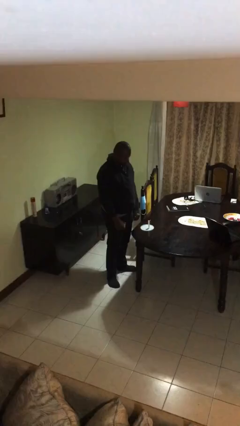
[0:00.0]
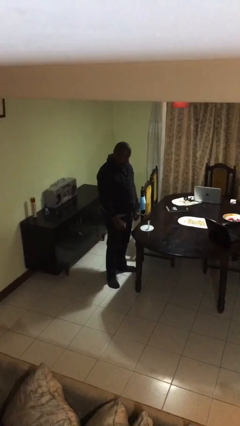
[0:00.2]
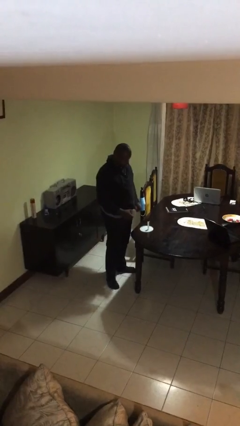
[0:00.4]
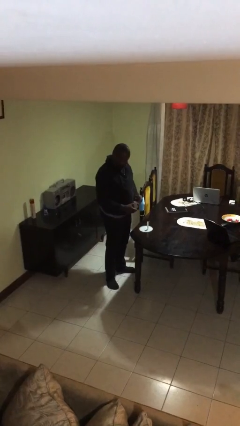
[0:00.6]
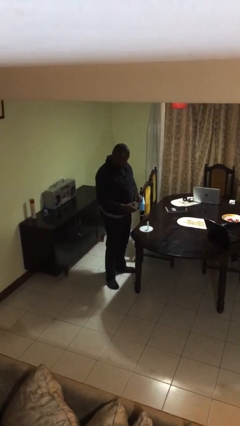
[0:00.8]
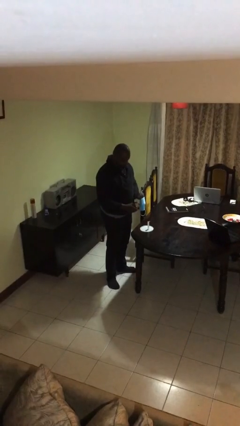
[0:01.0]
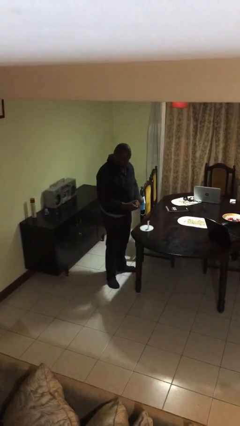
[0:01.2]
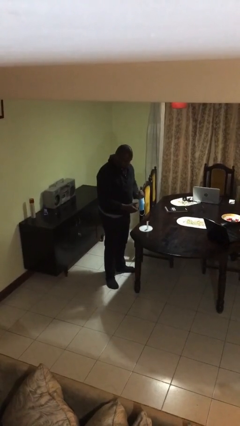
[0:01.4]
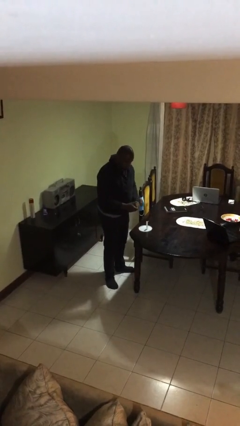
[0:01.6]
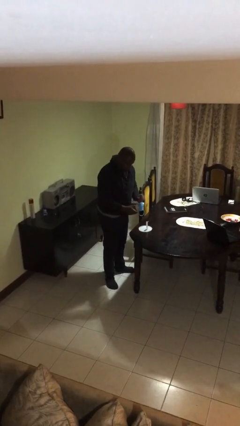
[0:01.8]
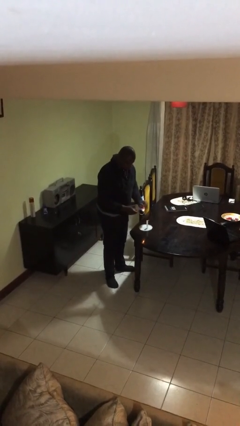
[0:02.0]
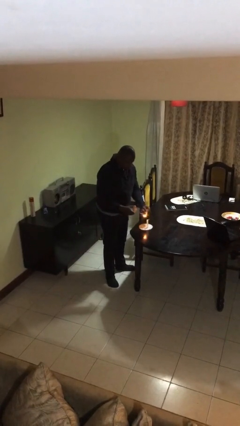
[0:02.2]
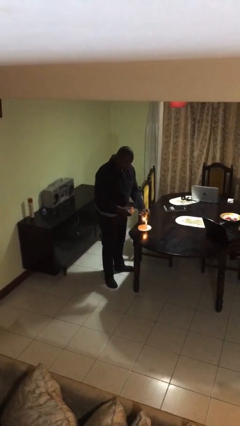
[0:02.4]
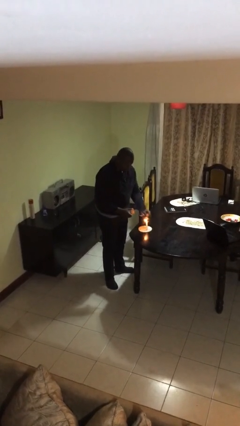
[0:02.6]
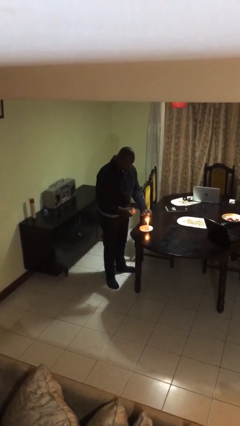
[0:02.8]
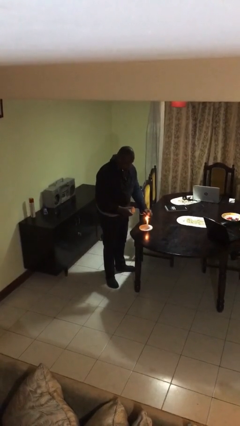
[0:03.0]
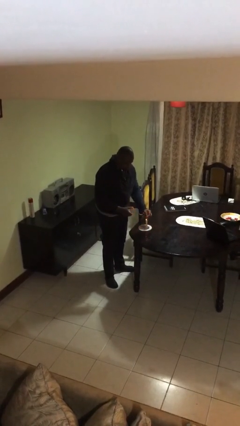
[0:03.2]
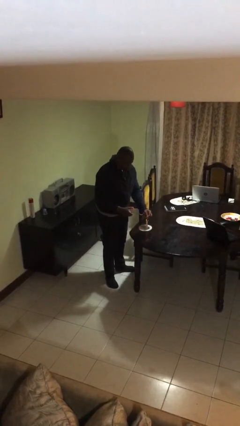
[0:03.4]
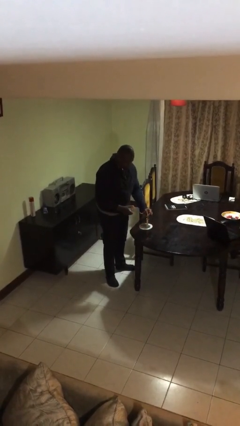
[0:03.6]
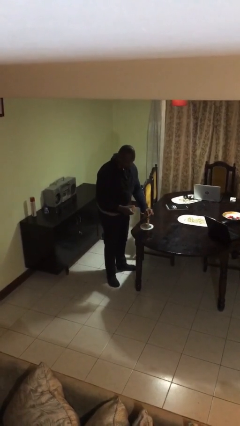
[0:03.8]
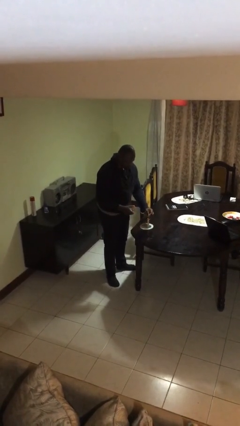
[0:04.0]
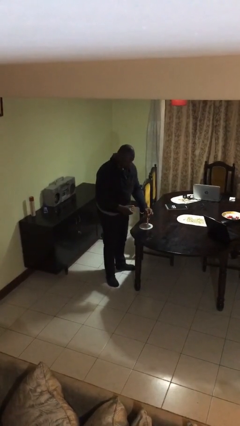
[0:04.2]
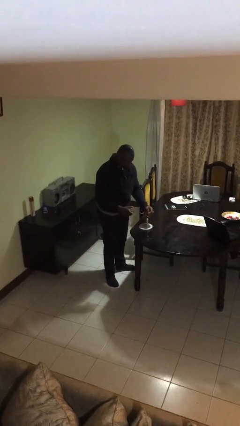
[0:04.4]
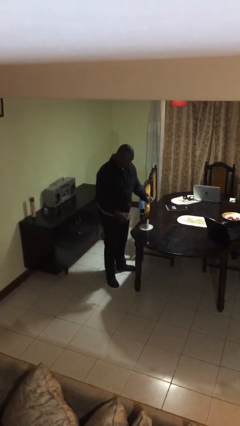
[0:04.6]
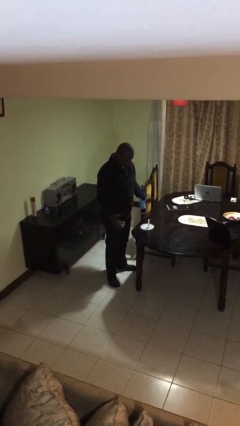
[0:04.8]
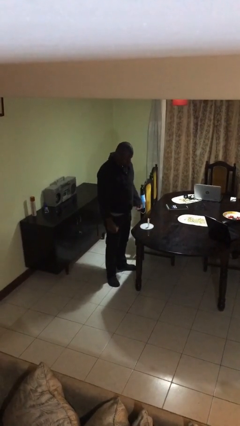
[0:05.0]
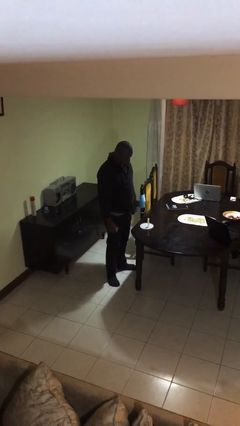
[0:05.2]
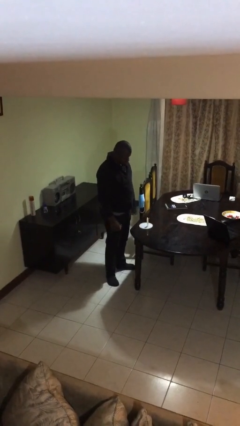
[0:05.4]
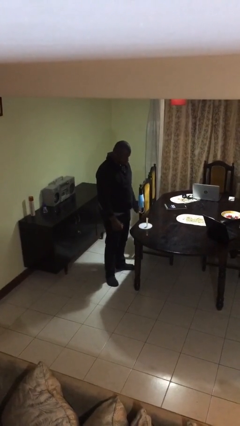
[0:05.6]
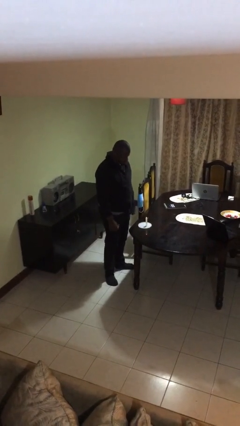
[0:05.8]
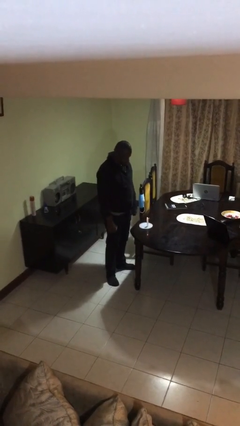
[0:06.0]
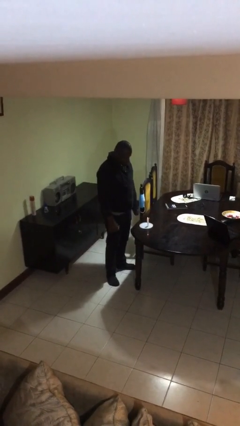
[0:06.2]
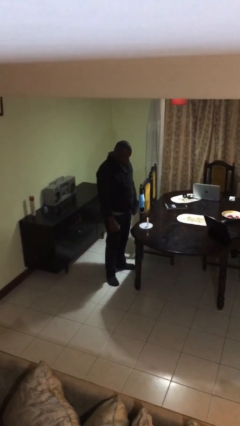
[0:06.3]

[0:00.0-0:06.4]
person lights candle

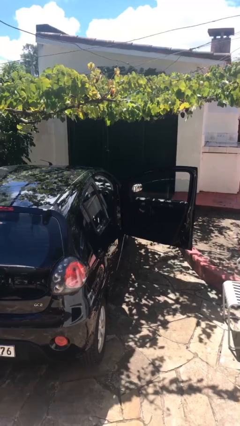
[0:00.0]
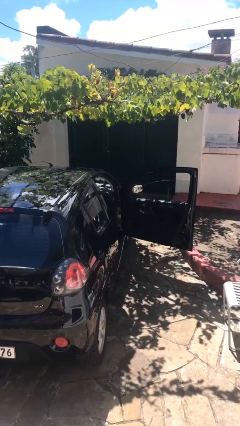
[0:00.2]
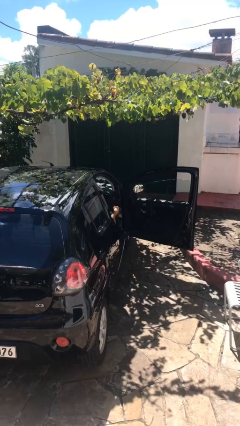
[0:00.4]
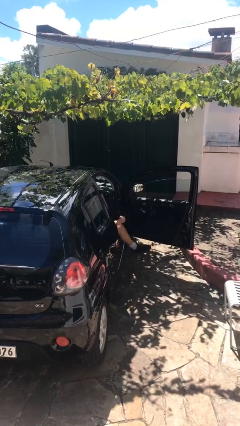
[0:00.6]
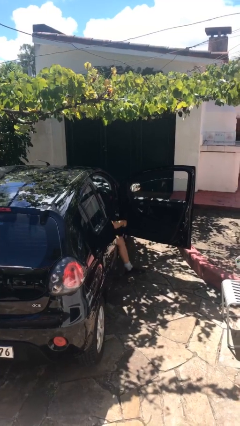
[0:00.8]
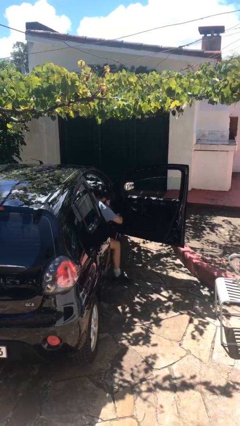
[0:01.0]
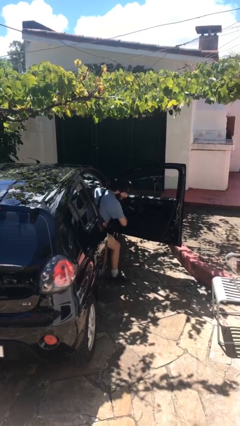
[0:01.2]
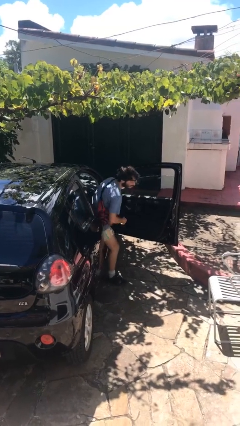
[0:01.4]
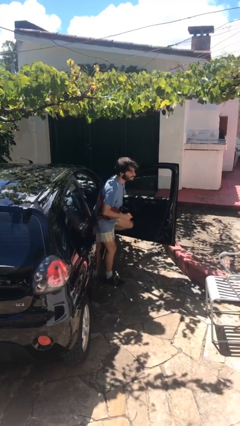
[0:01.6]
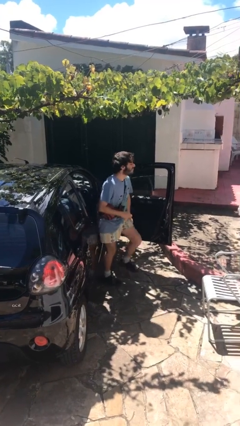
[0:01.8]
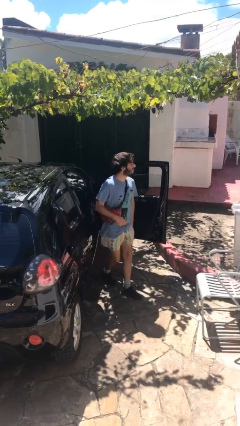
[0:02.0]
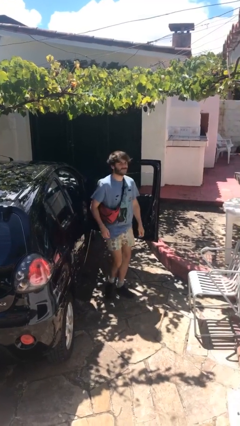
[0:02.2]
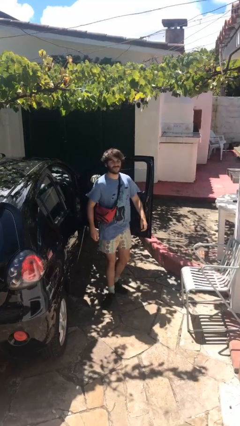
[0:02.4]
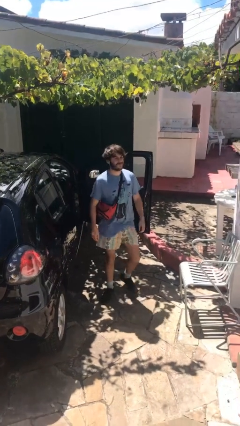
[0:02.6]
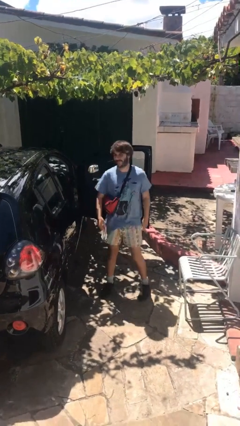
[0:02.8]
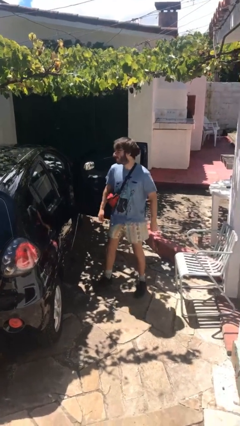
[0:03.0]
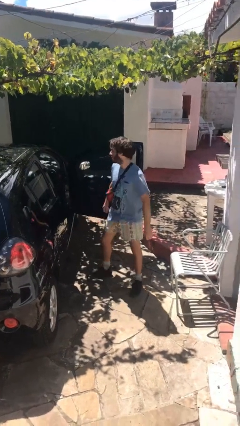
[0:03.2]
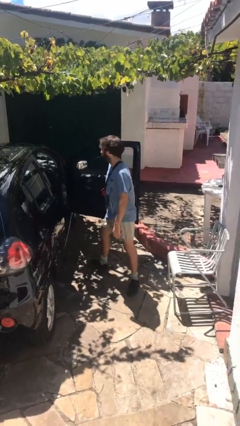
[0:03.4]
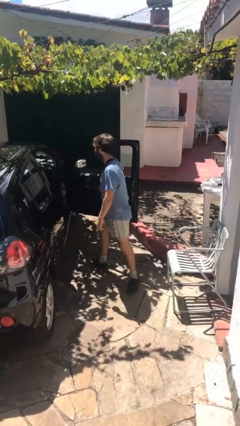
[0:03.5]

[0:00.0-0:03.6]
person exits car

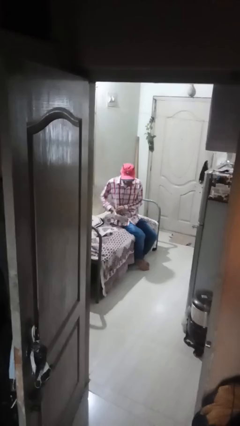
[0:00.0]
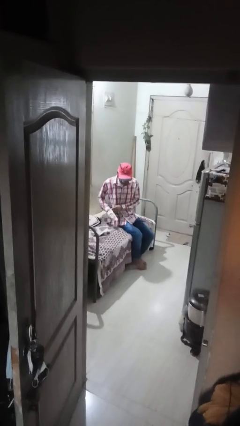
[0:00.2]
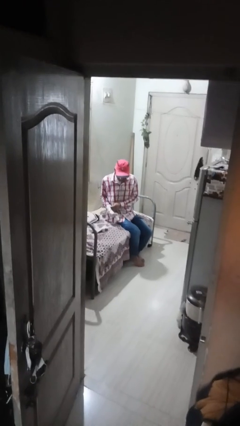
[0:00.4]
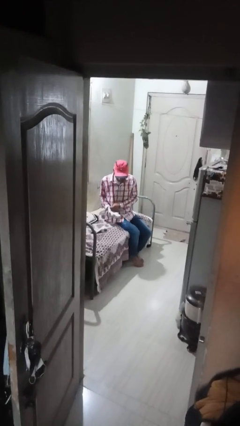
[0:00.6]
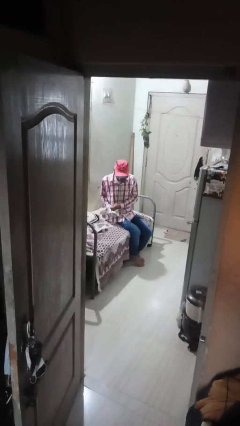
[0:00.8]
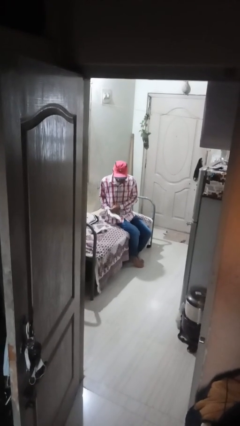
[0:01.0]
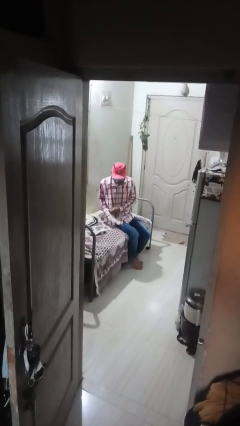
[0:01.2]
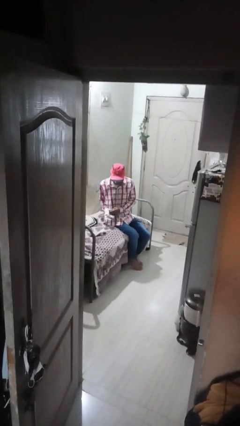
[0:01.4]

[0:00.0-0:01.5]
person puts on gloves

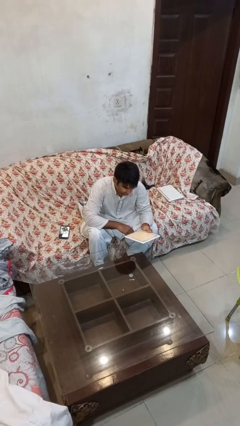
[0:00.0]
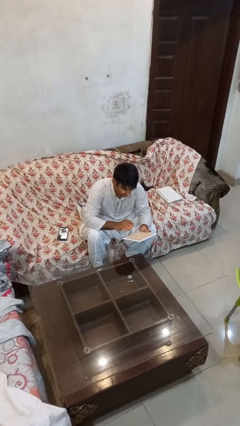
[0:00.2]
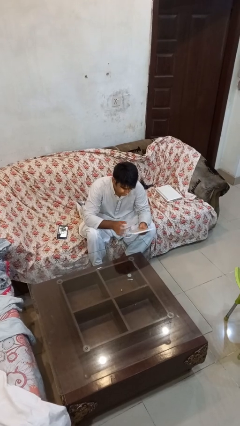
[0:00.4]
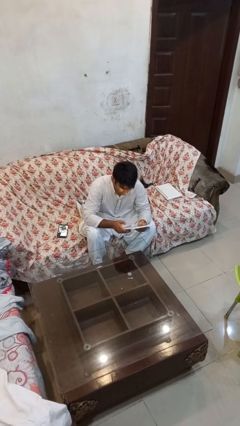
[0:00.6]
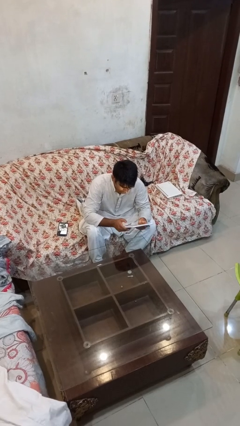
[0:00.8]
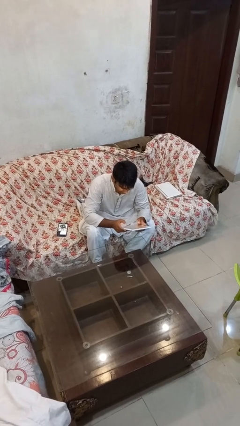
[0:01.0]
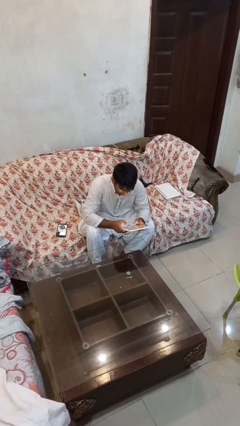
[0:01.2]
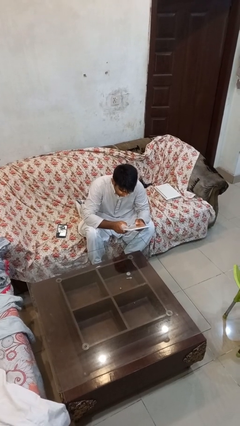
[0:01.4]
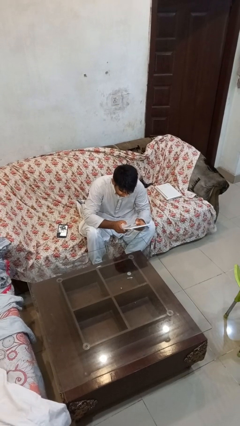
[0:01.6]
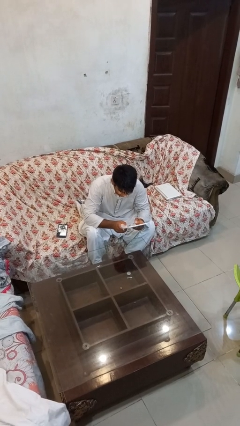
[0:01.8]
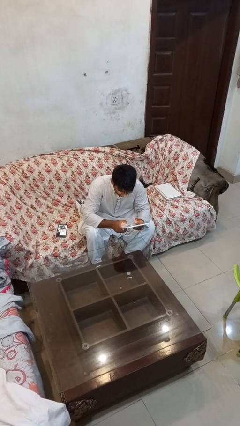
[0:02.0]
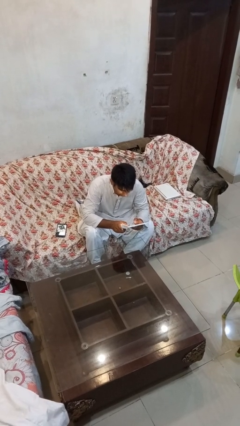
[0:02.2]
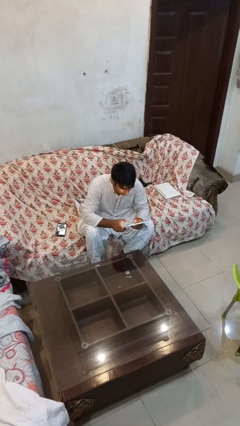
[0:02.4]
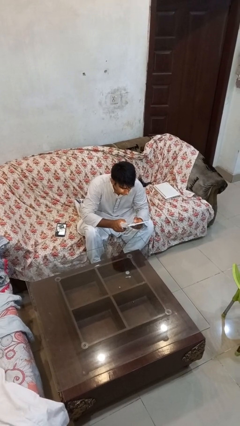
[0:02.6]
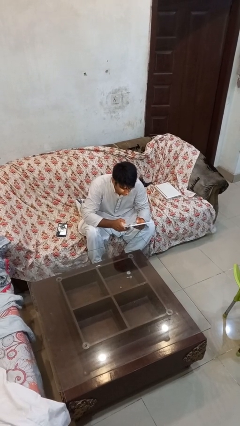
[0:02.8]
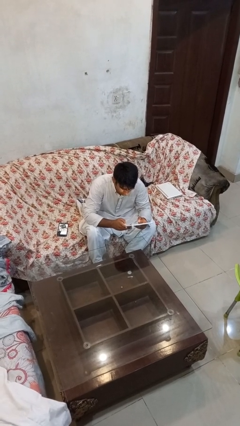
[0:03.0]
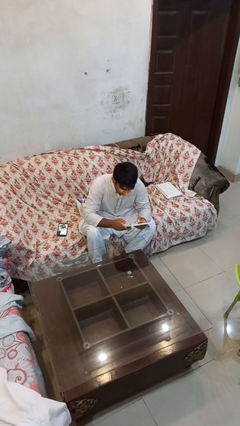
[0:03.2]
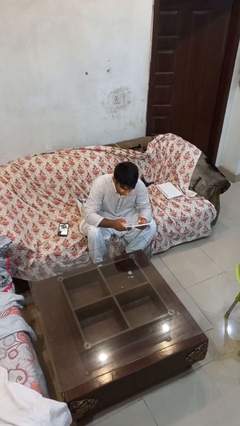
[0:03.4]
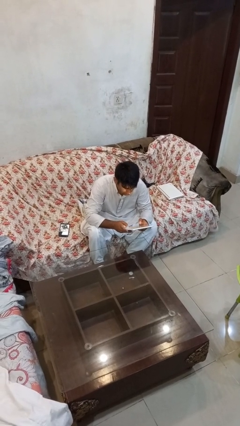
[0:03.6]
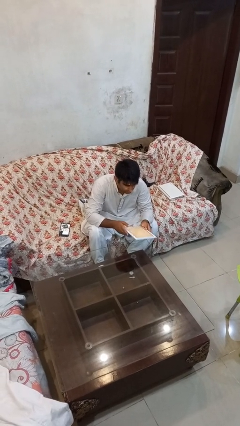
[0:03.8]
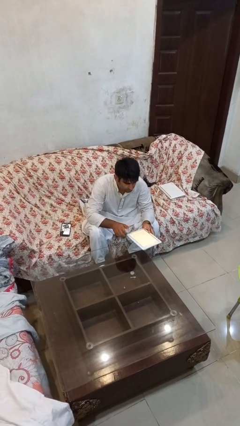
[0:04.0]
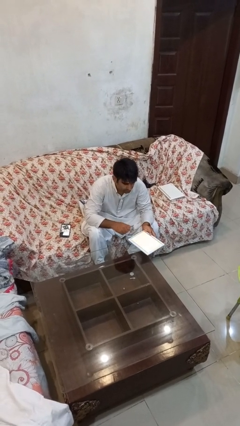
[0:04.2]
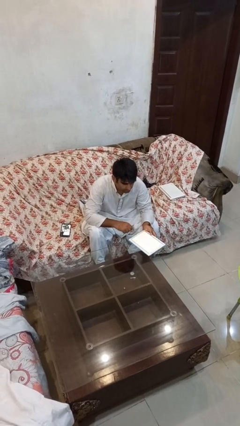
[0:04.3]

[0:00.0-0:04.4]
person interacts with tablet

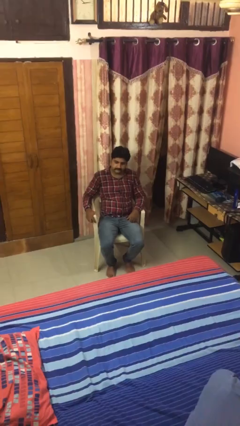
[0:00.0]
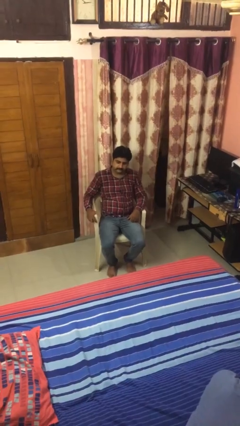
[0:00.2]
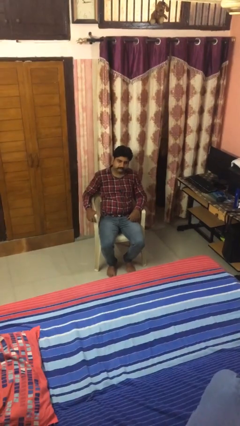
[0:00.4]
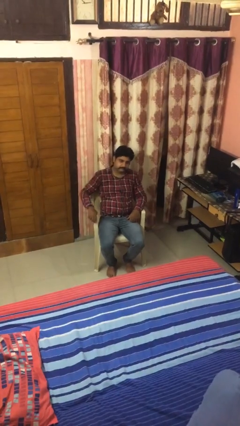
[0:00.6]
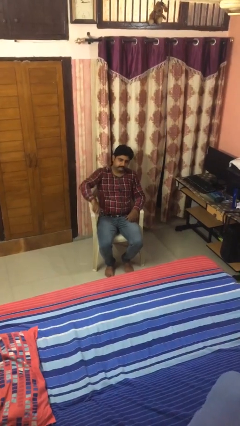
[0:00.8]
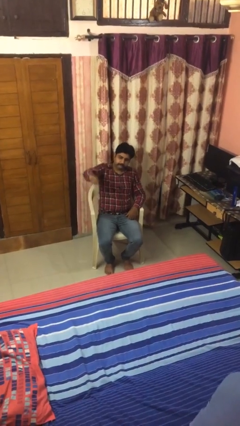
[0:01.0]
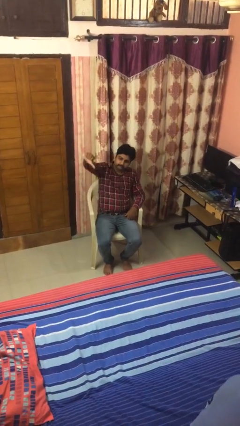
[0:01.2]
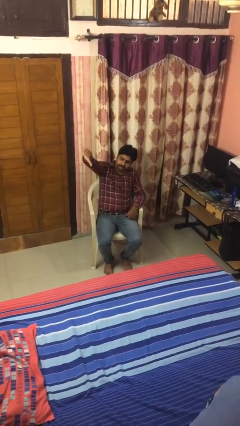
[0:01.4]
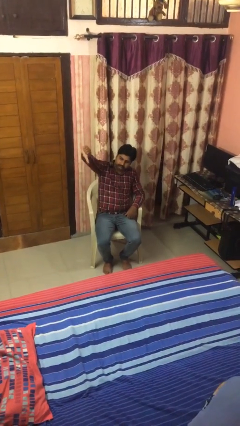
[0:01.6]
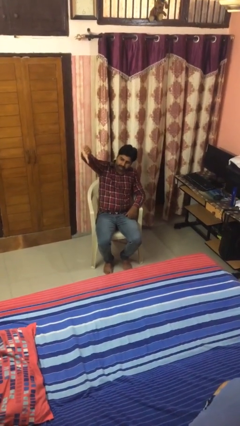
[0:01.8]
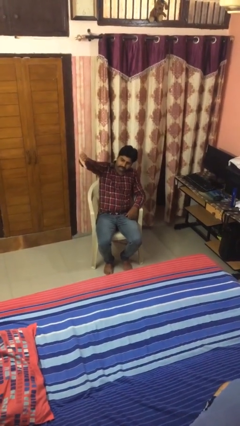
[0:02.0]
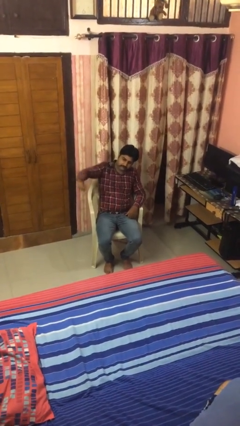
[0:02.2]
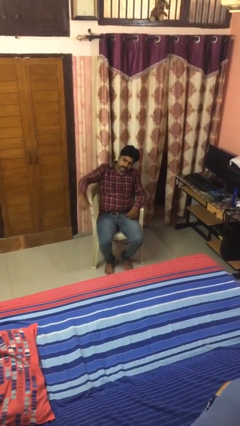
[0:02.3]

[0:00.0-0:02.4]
person gestures thumbs down
